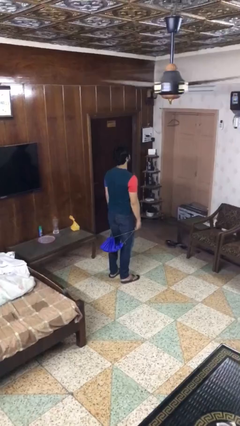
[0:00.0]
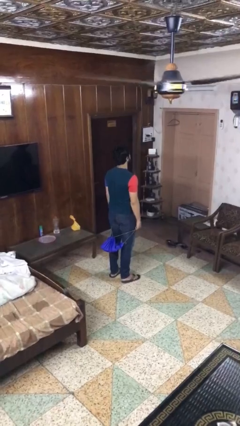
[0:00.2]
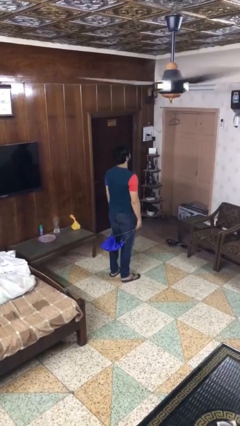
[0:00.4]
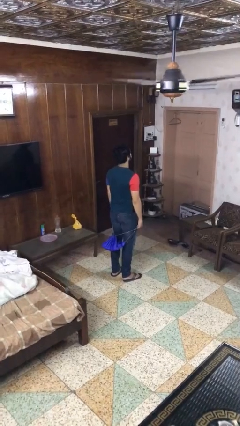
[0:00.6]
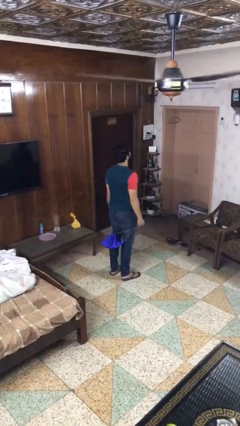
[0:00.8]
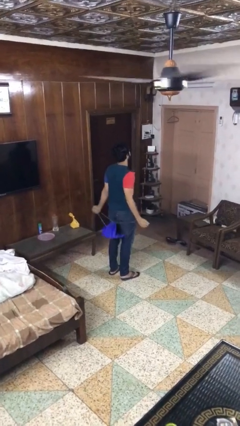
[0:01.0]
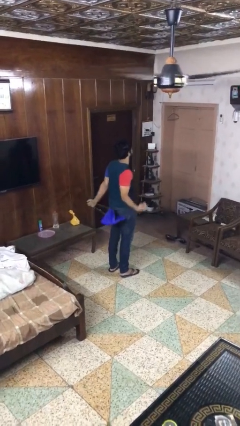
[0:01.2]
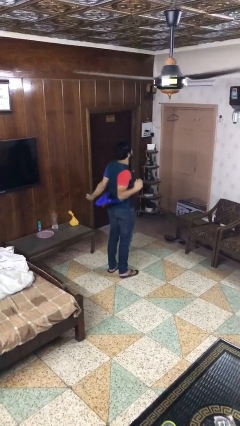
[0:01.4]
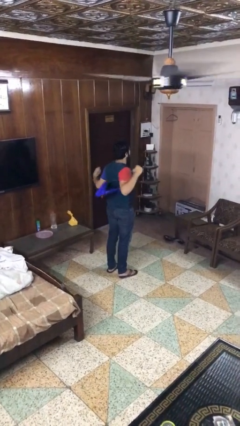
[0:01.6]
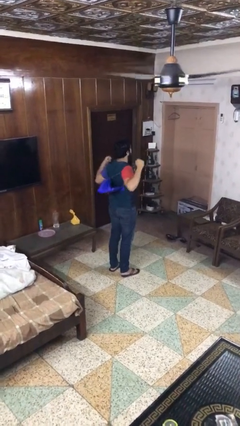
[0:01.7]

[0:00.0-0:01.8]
person puts on backpack

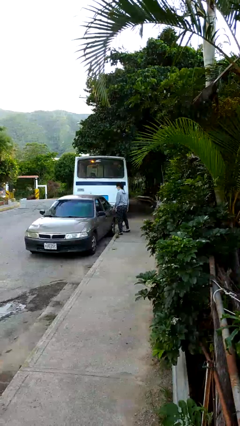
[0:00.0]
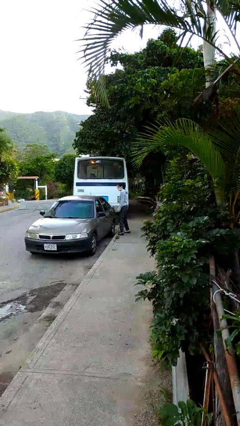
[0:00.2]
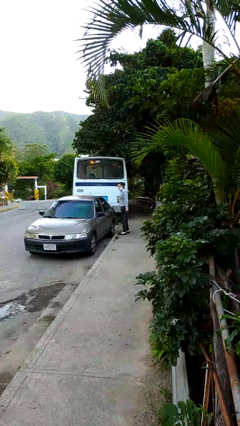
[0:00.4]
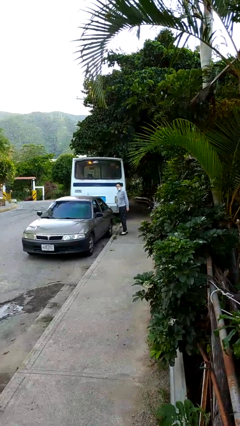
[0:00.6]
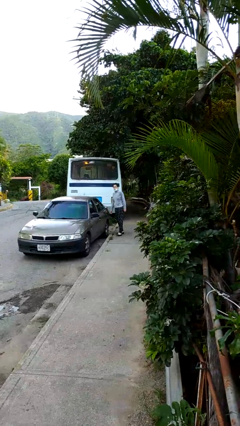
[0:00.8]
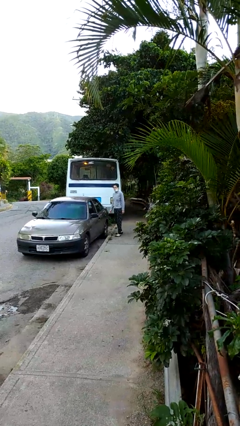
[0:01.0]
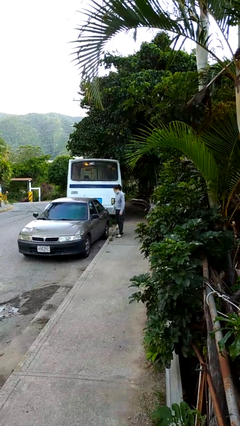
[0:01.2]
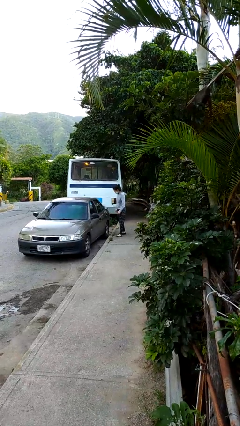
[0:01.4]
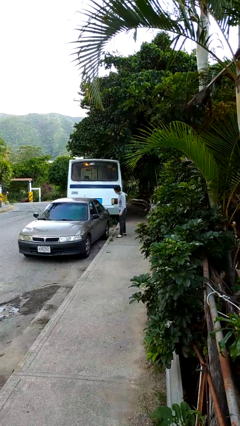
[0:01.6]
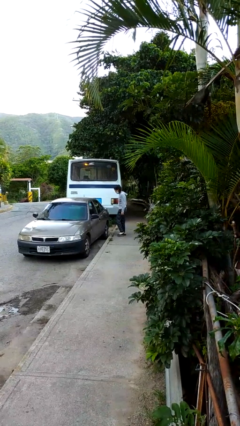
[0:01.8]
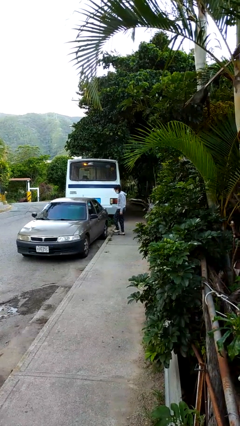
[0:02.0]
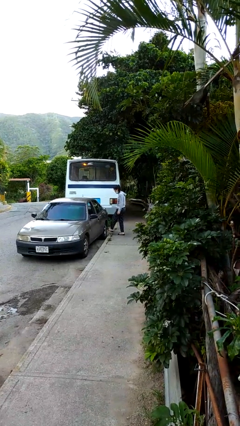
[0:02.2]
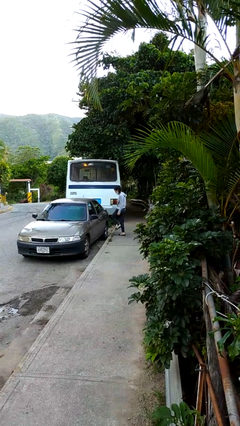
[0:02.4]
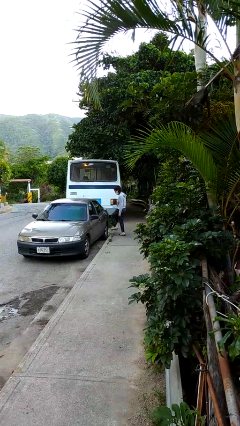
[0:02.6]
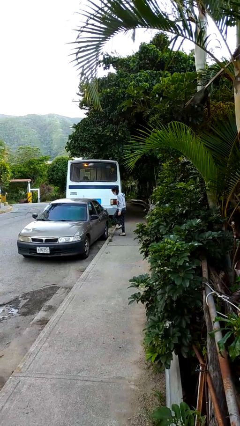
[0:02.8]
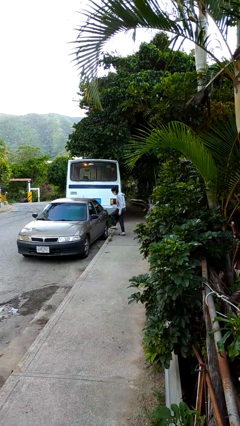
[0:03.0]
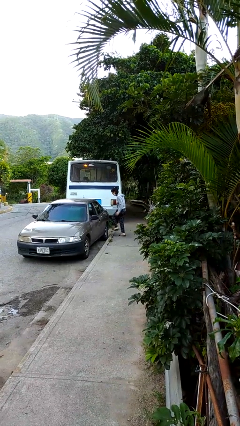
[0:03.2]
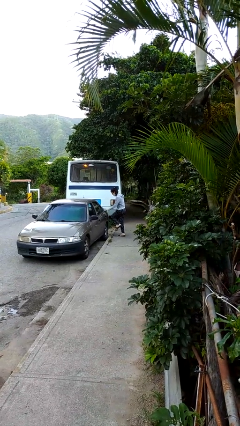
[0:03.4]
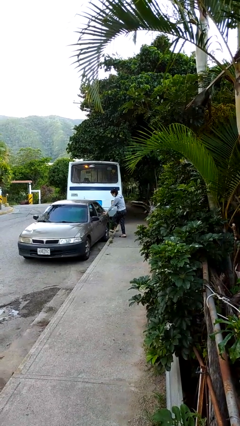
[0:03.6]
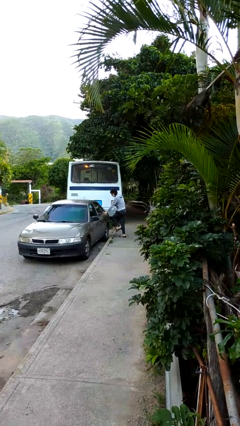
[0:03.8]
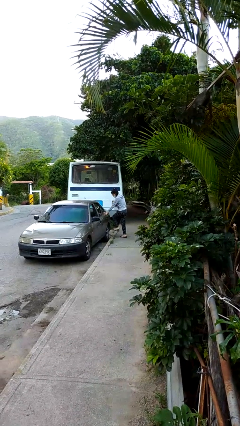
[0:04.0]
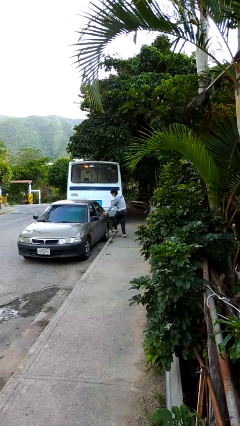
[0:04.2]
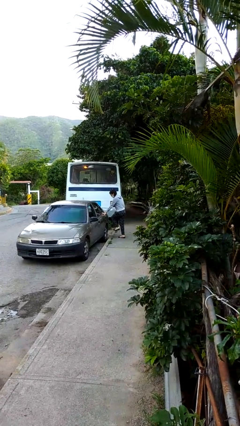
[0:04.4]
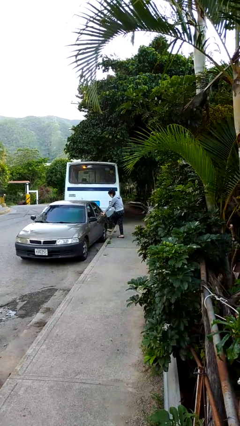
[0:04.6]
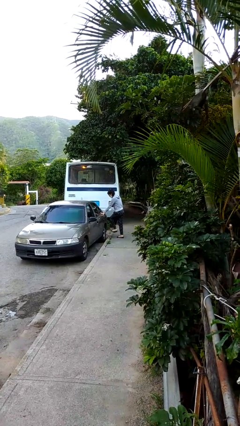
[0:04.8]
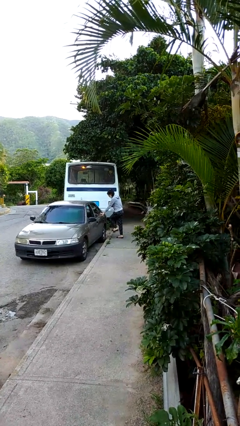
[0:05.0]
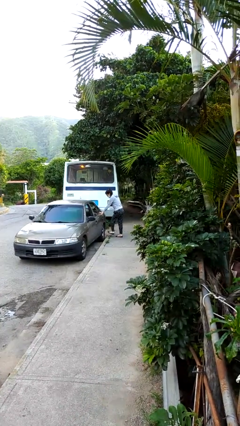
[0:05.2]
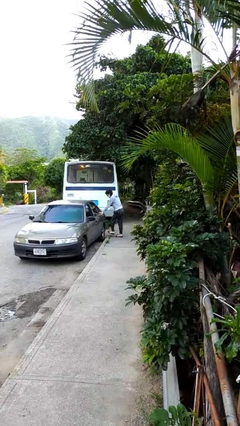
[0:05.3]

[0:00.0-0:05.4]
person kicks car tires

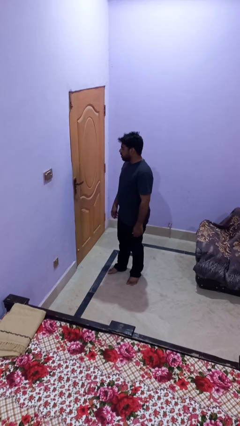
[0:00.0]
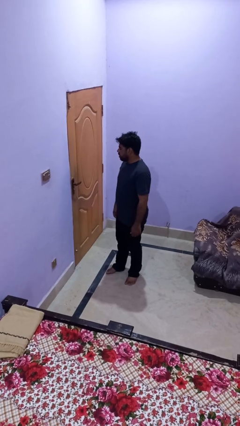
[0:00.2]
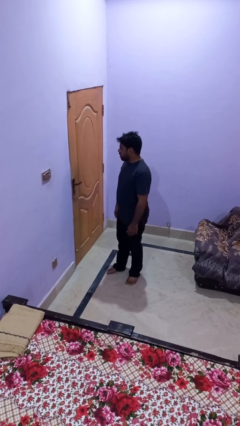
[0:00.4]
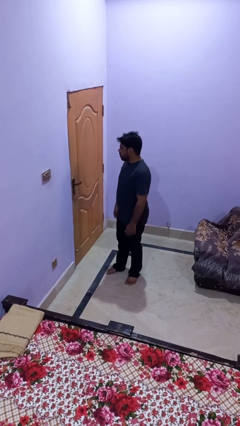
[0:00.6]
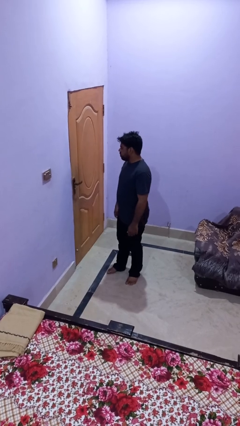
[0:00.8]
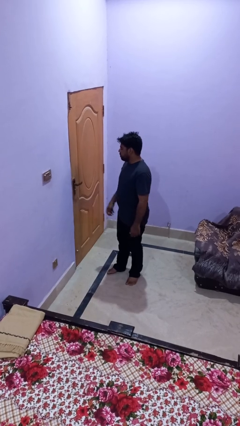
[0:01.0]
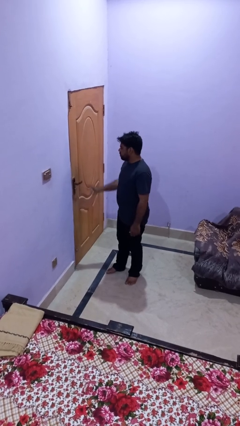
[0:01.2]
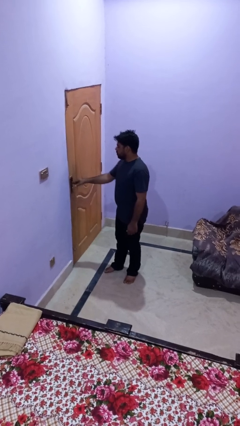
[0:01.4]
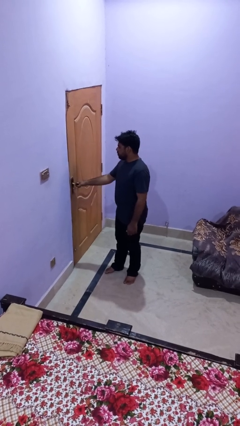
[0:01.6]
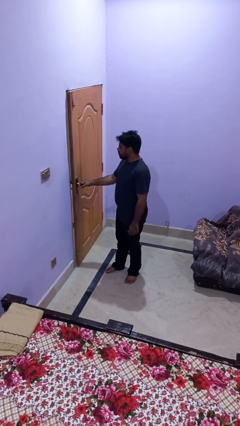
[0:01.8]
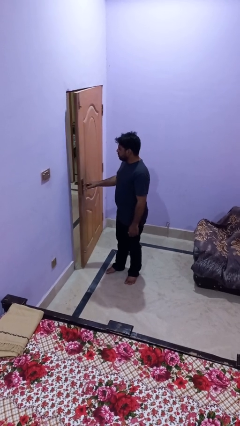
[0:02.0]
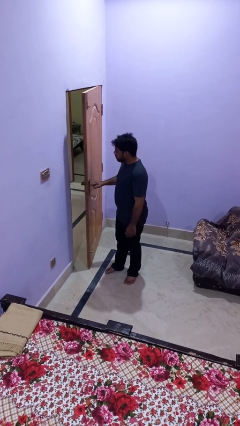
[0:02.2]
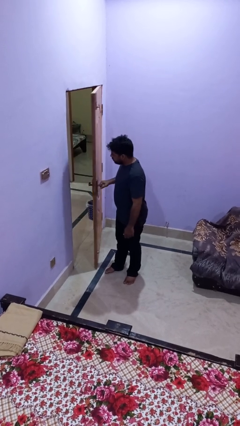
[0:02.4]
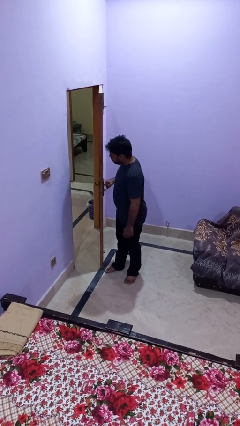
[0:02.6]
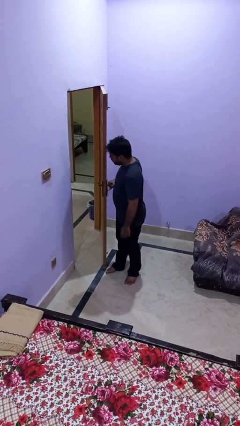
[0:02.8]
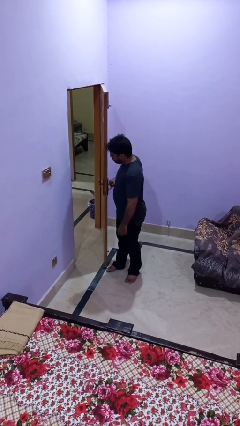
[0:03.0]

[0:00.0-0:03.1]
person opens facility door

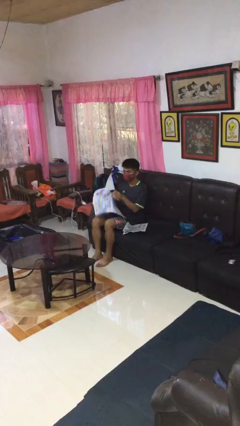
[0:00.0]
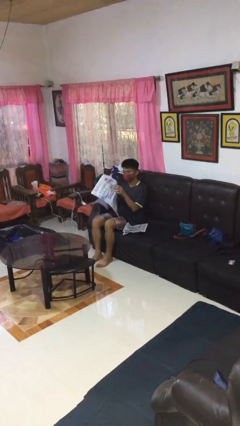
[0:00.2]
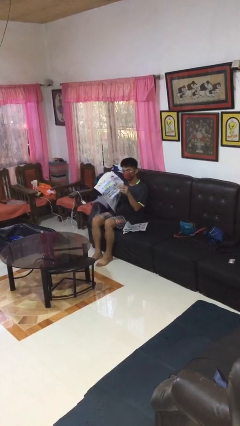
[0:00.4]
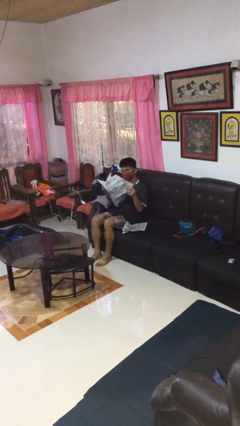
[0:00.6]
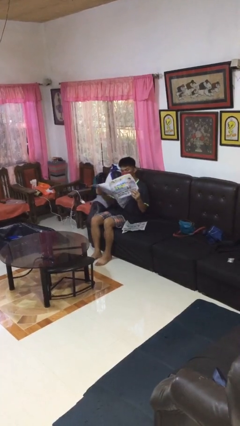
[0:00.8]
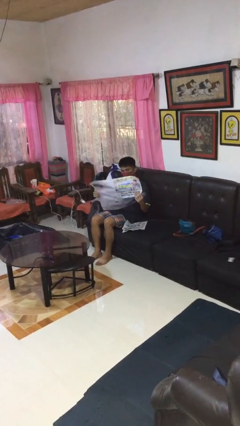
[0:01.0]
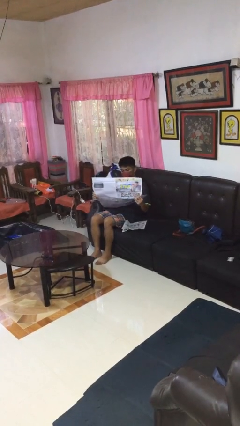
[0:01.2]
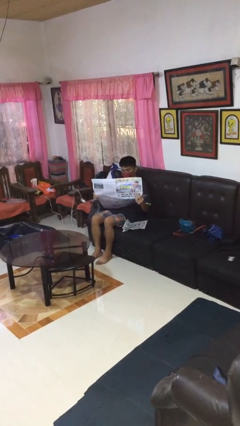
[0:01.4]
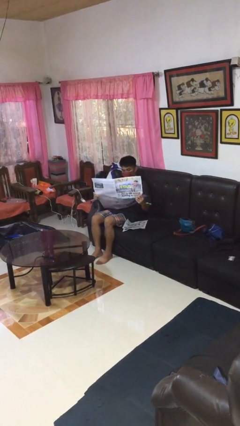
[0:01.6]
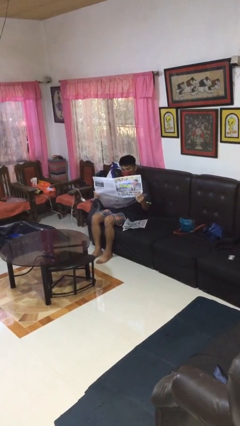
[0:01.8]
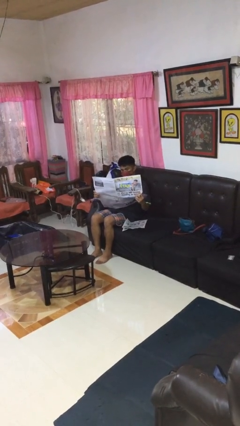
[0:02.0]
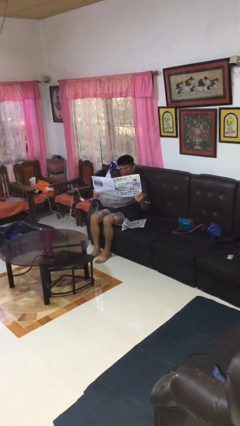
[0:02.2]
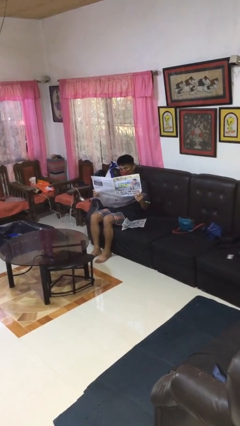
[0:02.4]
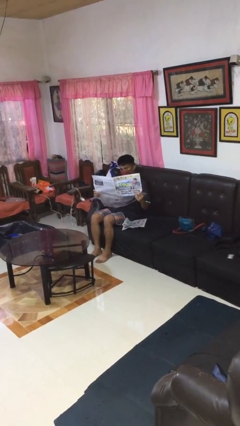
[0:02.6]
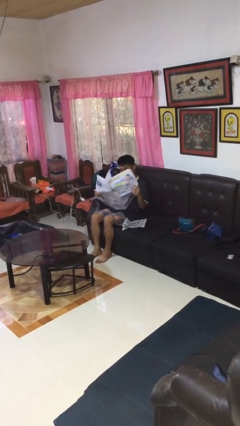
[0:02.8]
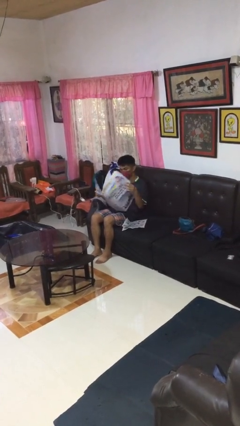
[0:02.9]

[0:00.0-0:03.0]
person reads newspaper

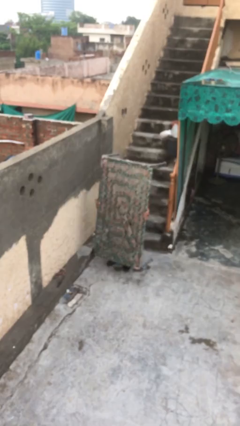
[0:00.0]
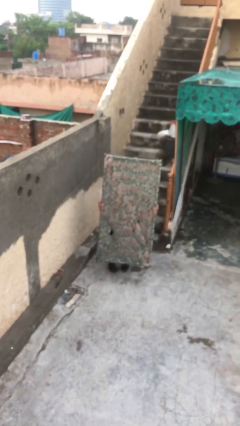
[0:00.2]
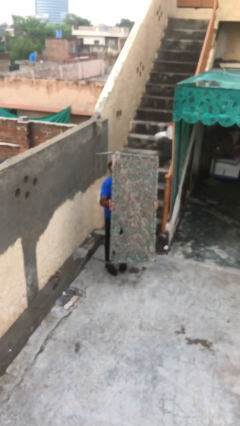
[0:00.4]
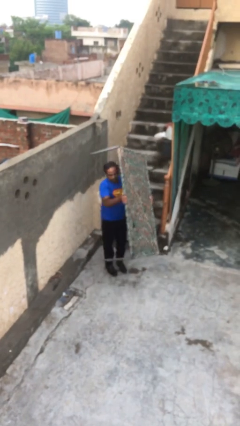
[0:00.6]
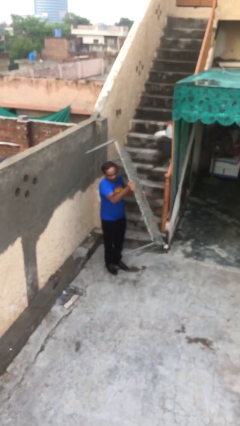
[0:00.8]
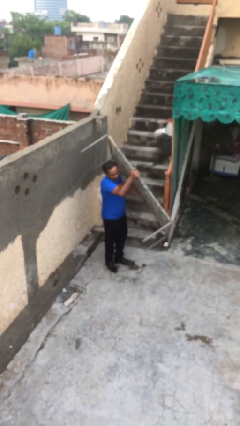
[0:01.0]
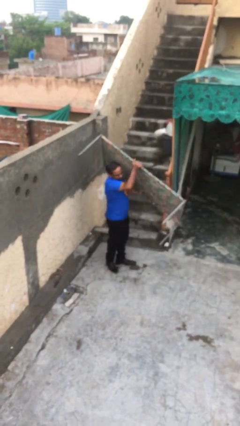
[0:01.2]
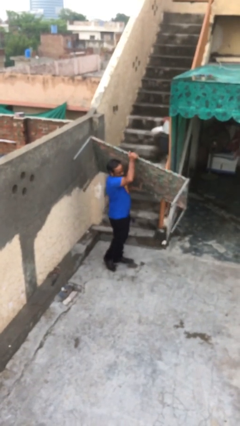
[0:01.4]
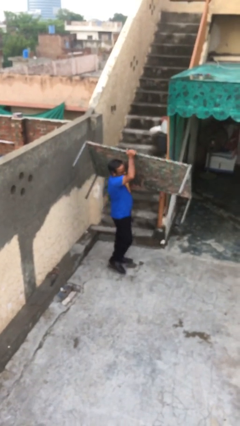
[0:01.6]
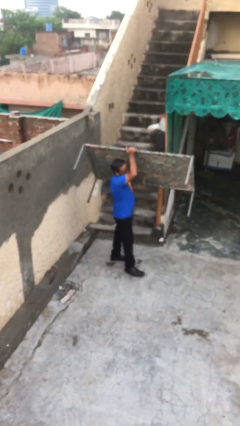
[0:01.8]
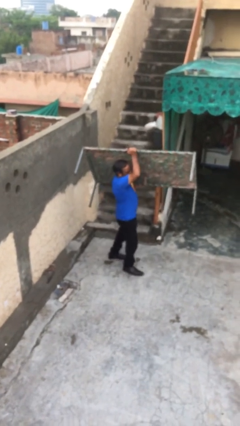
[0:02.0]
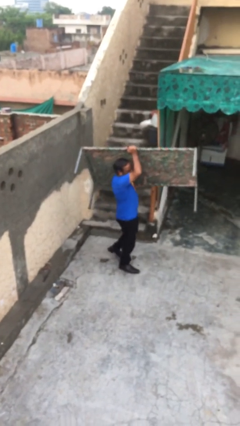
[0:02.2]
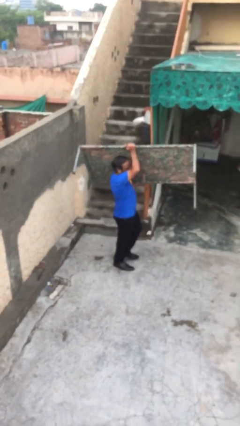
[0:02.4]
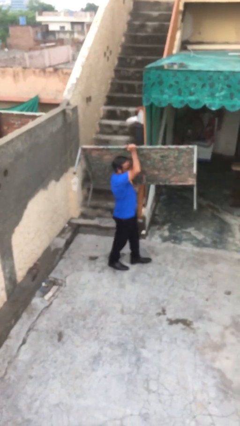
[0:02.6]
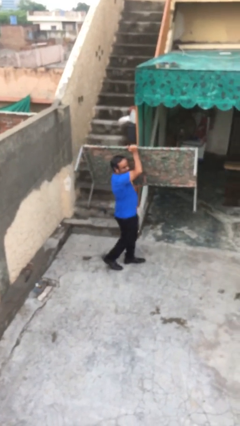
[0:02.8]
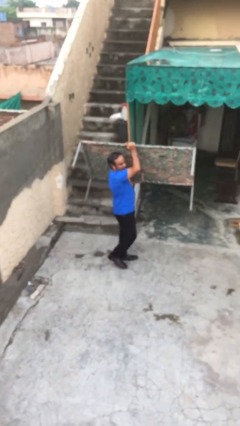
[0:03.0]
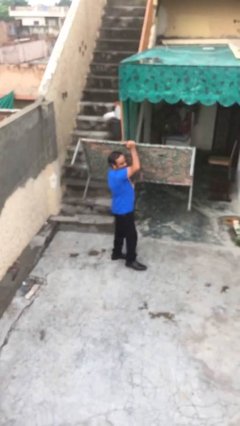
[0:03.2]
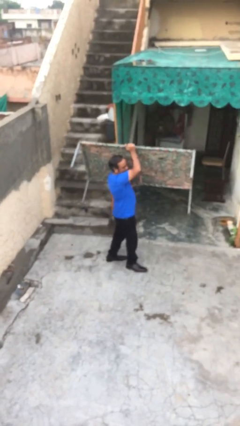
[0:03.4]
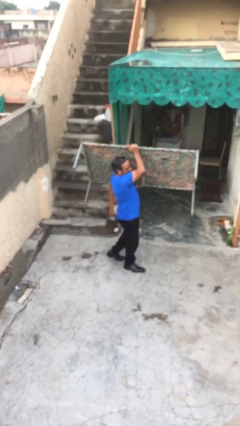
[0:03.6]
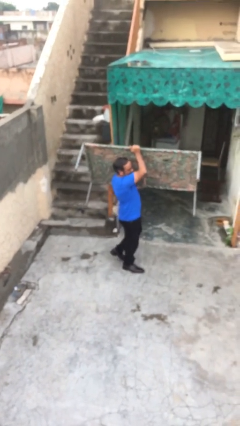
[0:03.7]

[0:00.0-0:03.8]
person carries heavy object

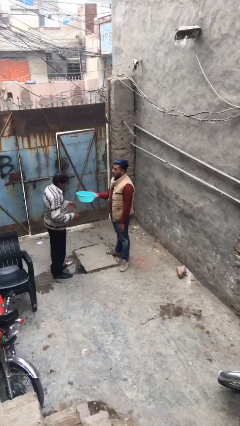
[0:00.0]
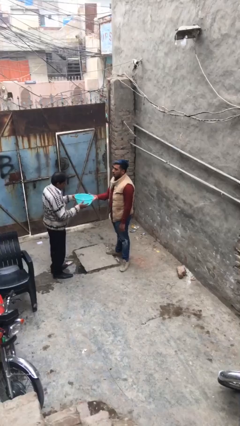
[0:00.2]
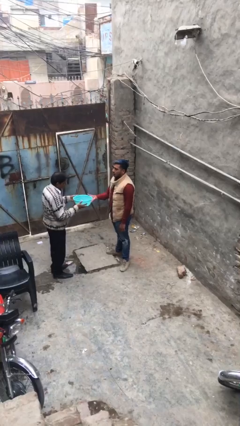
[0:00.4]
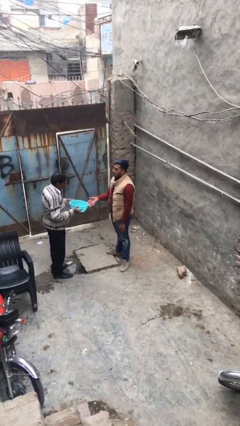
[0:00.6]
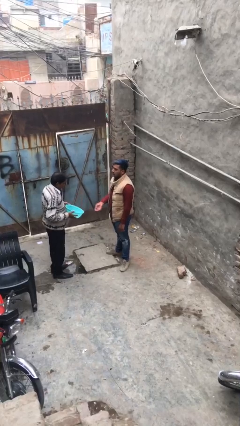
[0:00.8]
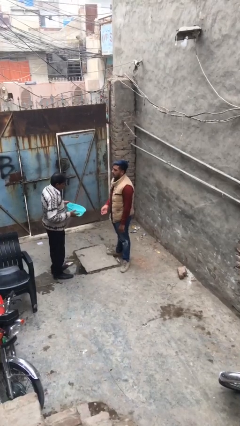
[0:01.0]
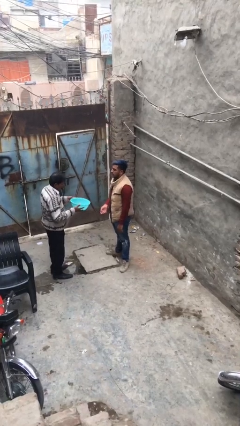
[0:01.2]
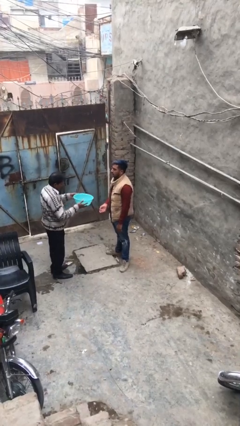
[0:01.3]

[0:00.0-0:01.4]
person transfers object to person
